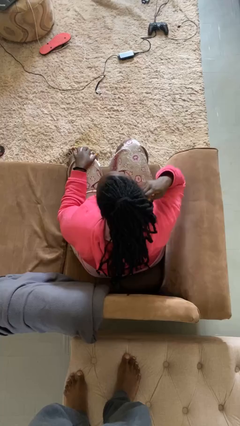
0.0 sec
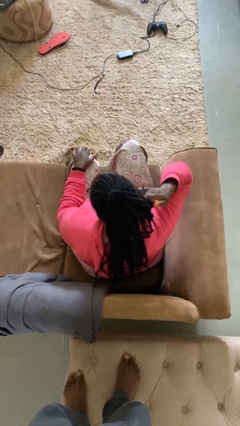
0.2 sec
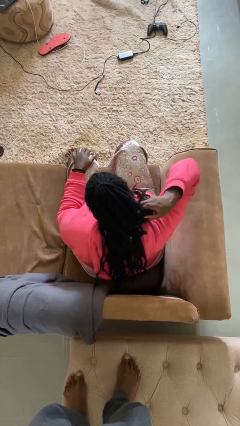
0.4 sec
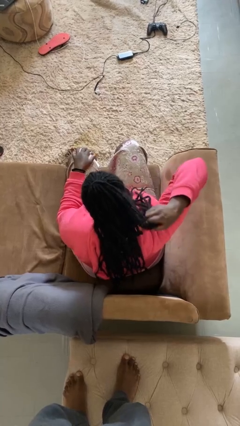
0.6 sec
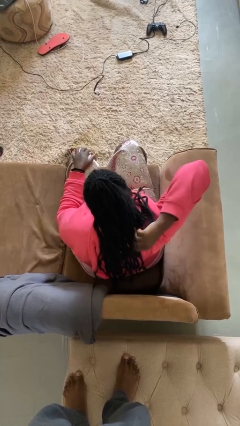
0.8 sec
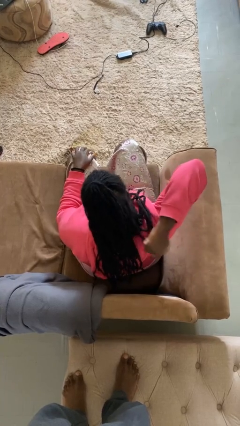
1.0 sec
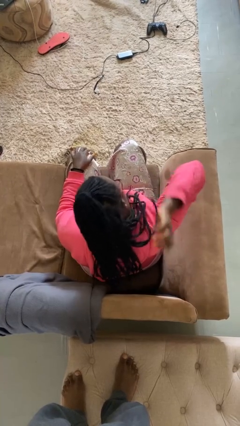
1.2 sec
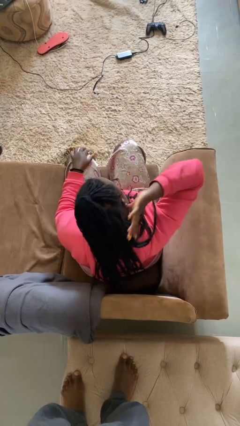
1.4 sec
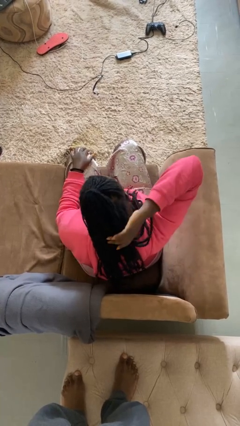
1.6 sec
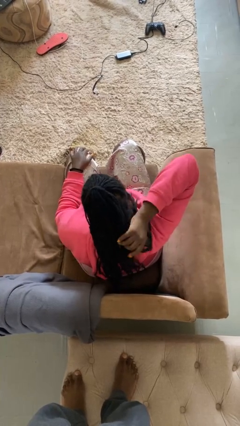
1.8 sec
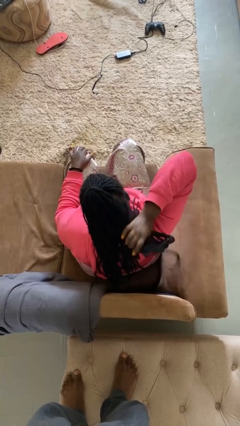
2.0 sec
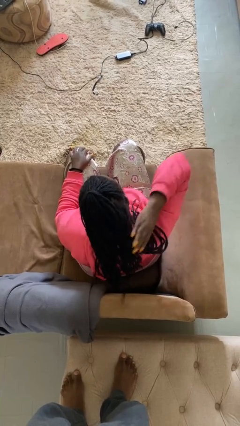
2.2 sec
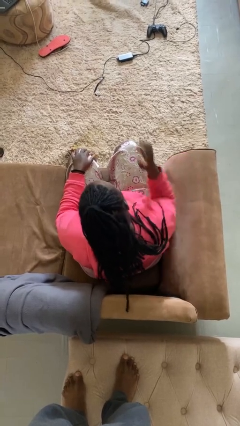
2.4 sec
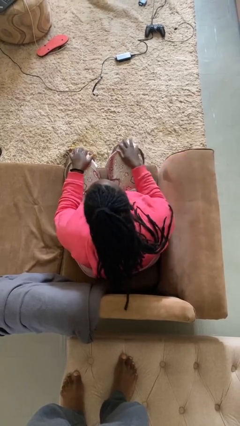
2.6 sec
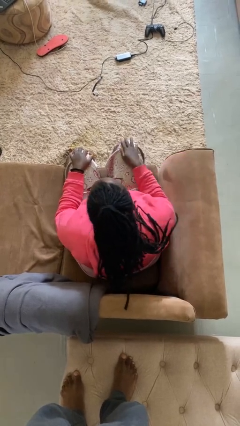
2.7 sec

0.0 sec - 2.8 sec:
person strokes hair

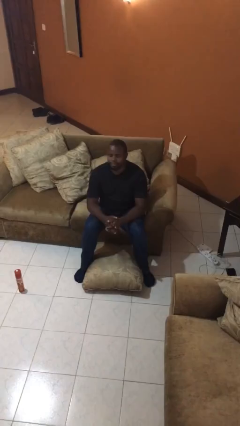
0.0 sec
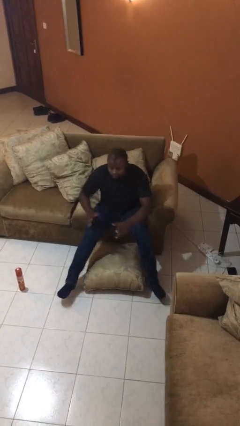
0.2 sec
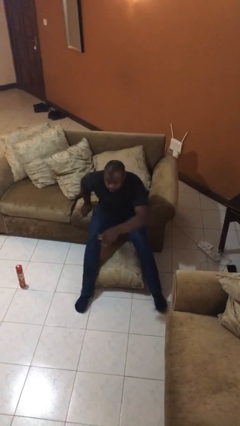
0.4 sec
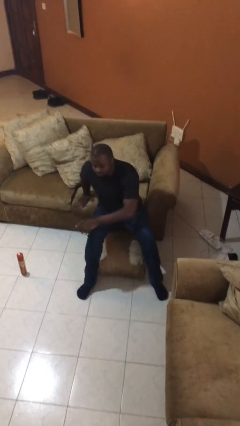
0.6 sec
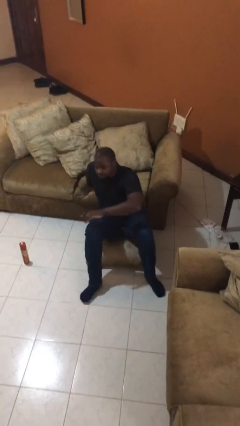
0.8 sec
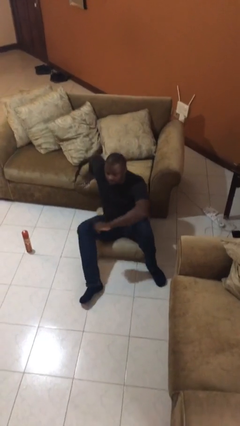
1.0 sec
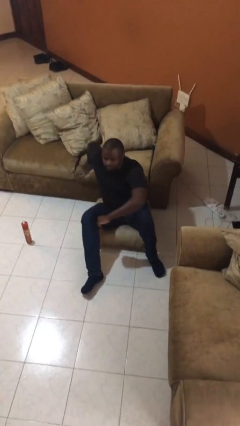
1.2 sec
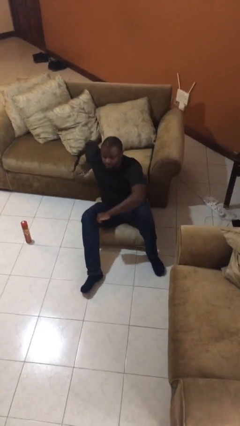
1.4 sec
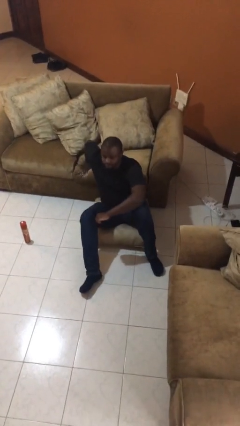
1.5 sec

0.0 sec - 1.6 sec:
person falls from chair

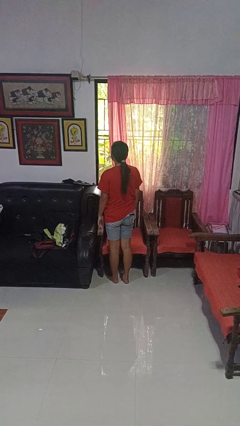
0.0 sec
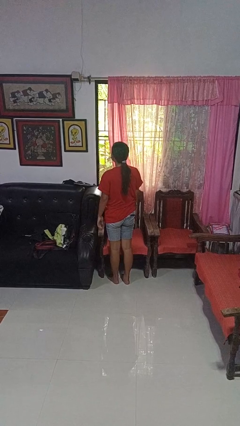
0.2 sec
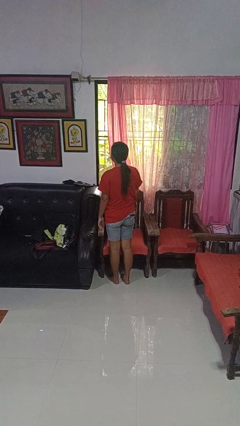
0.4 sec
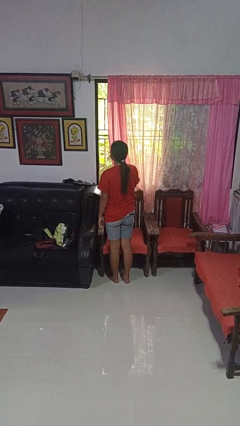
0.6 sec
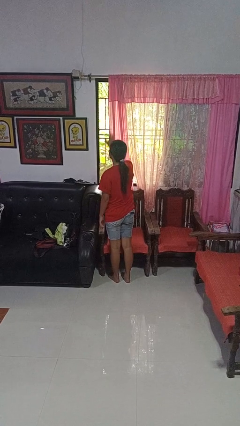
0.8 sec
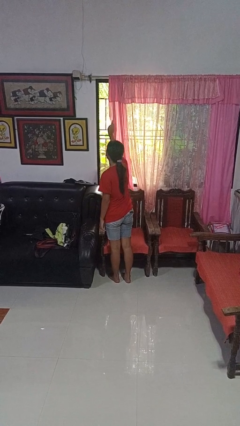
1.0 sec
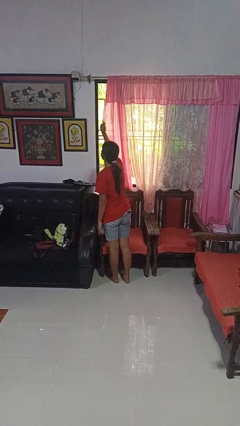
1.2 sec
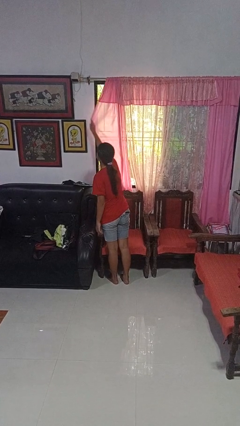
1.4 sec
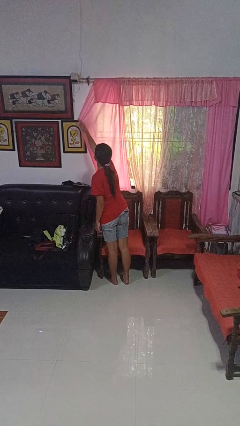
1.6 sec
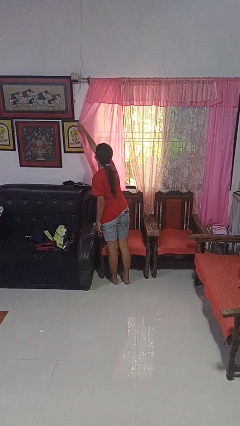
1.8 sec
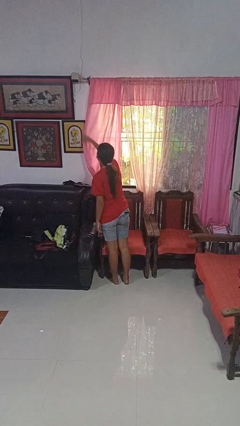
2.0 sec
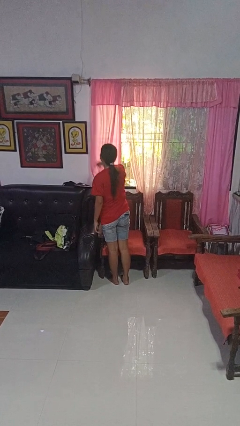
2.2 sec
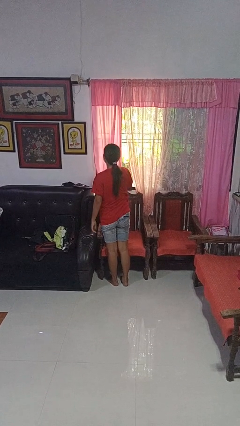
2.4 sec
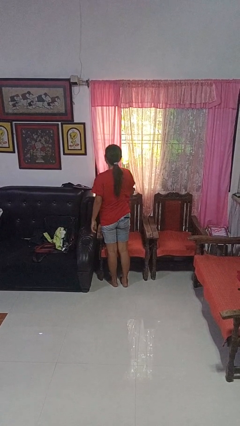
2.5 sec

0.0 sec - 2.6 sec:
person closes curtains

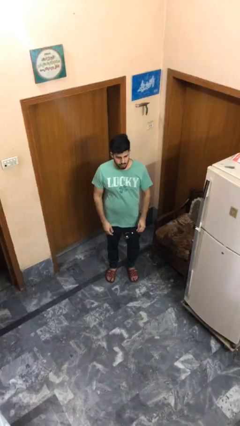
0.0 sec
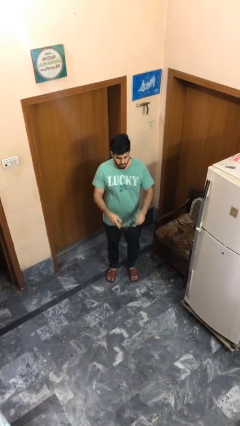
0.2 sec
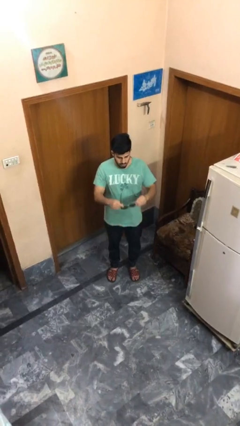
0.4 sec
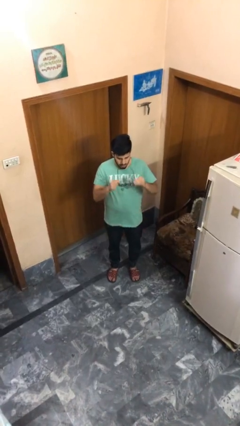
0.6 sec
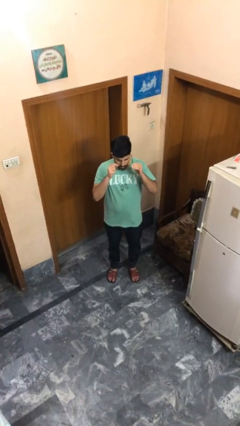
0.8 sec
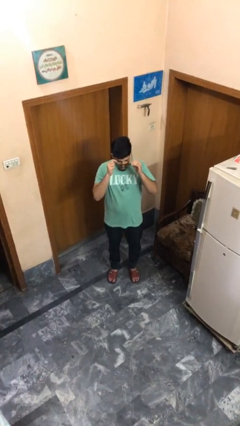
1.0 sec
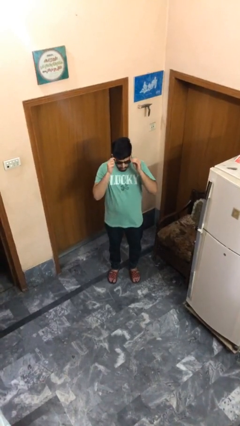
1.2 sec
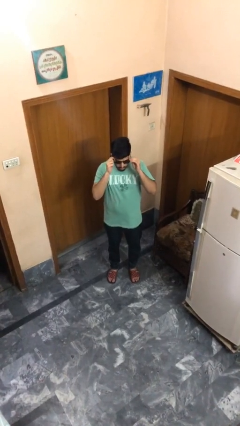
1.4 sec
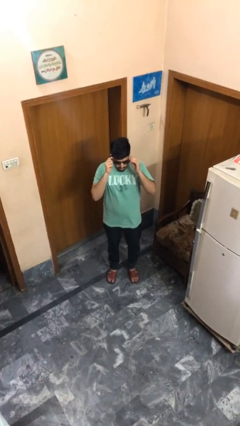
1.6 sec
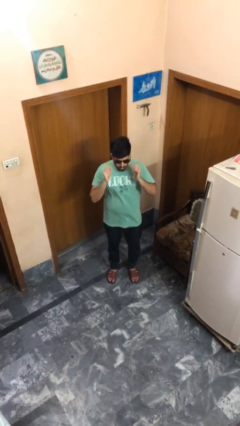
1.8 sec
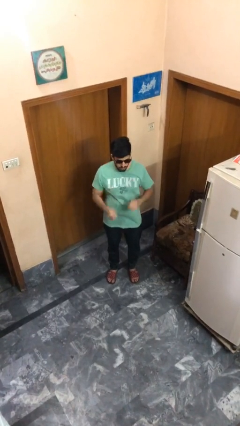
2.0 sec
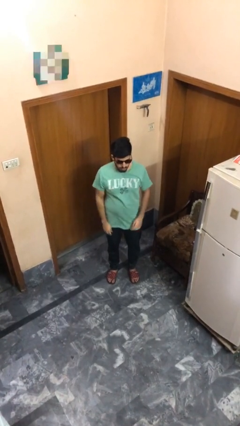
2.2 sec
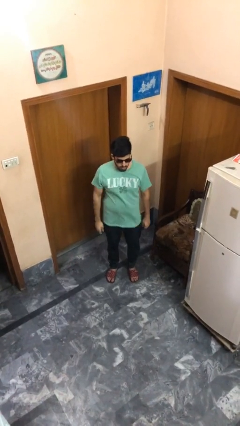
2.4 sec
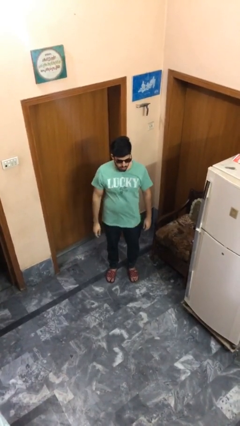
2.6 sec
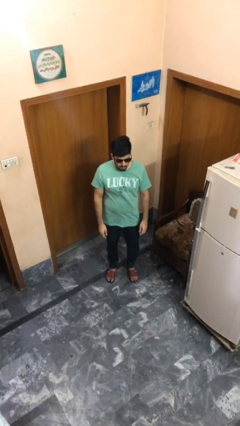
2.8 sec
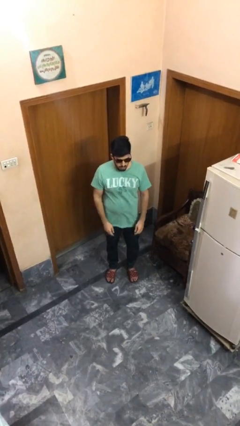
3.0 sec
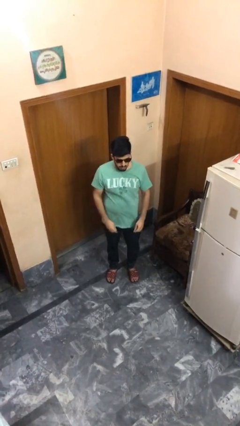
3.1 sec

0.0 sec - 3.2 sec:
person puts on sunglasses

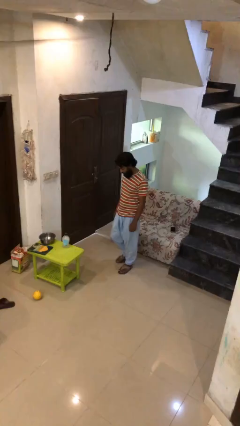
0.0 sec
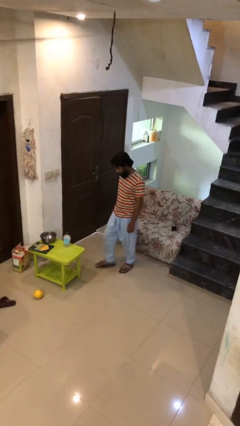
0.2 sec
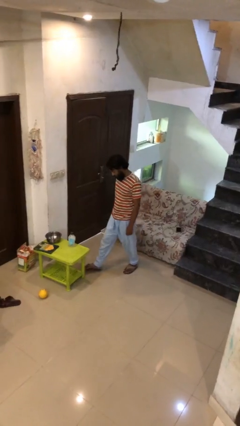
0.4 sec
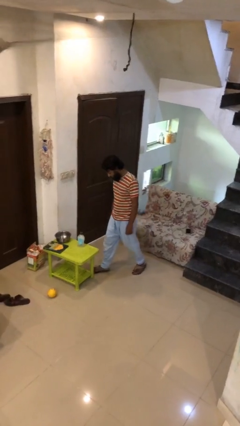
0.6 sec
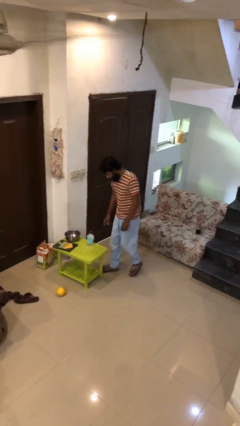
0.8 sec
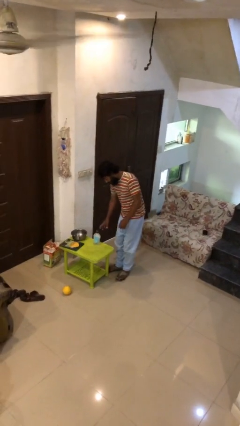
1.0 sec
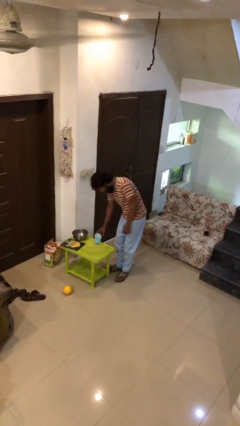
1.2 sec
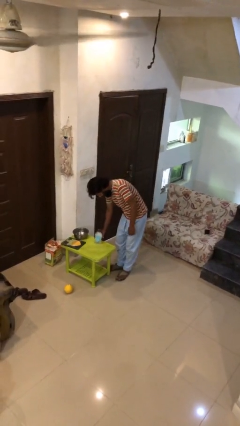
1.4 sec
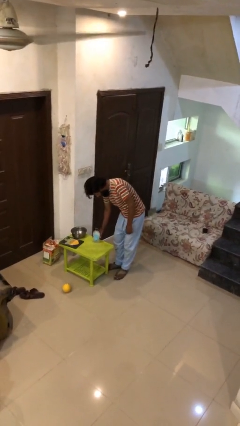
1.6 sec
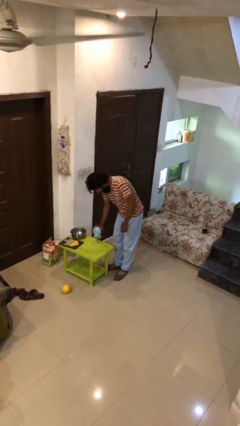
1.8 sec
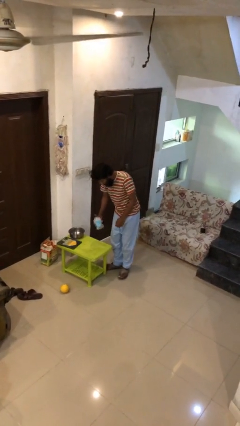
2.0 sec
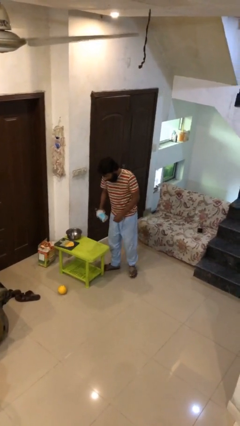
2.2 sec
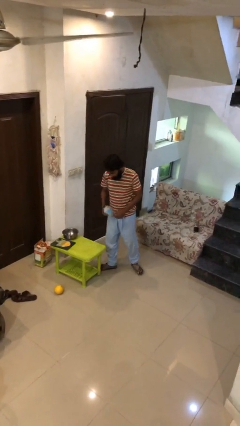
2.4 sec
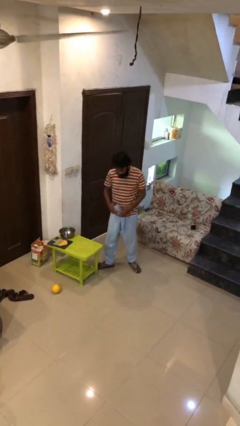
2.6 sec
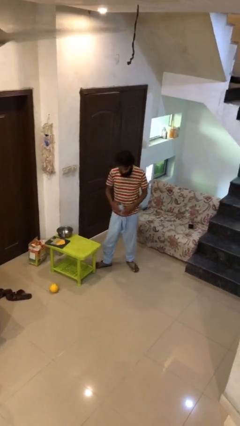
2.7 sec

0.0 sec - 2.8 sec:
person picks up object from table

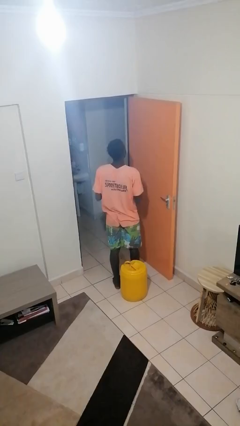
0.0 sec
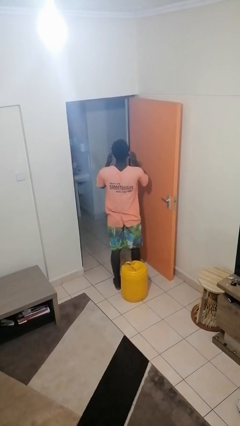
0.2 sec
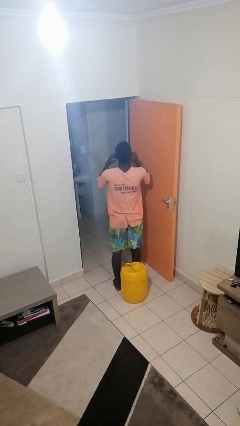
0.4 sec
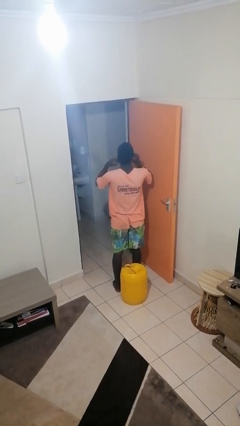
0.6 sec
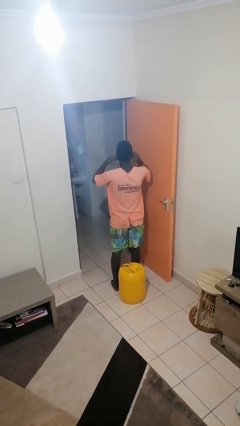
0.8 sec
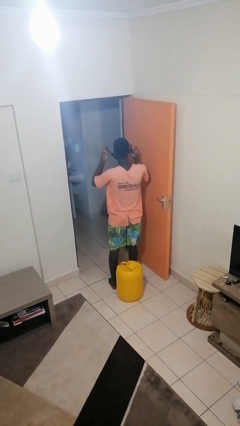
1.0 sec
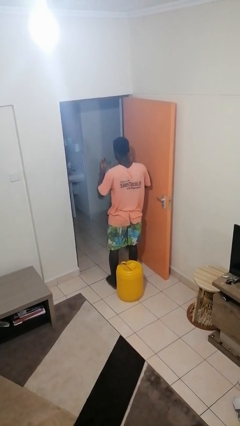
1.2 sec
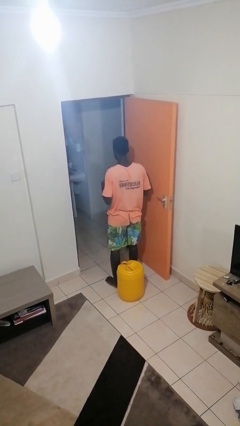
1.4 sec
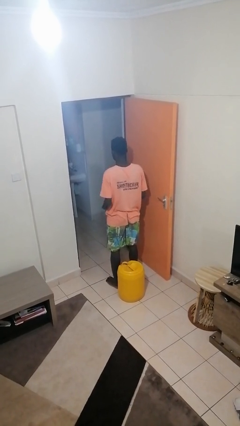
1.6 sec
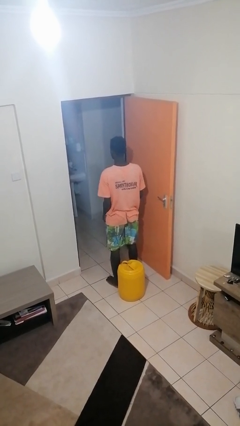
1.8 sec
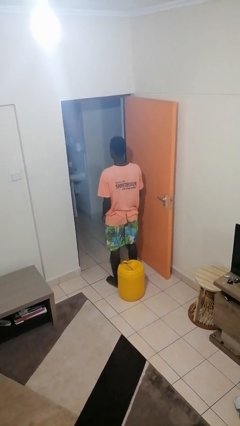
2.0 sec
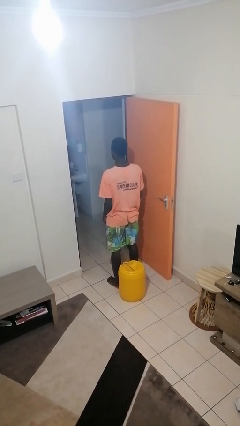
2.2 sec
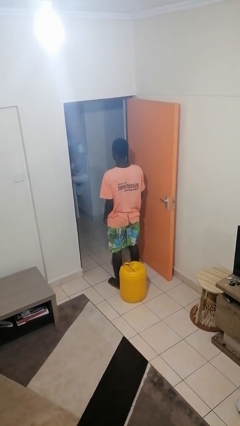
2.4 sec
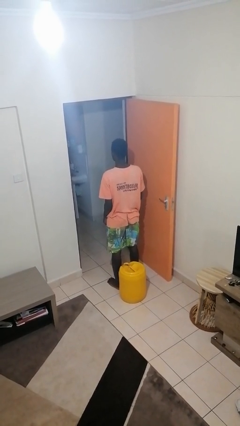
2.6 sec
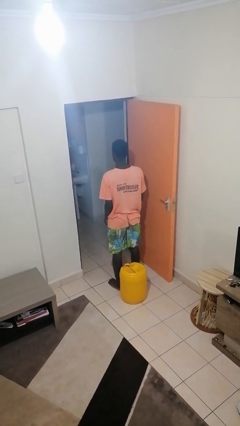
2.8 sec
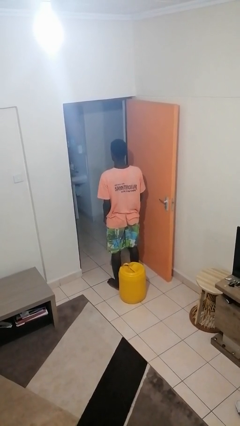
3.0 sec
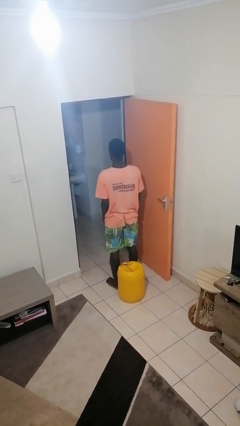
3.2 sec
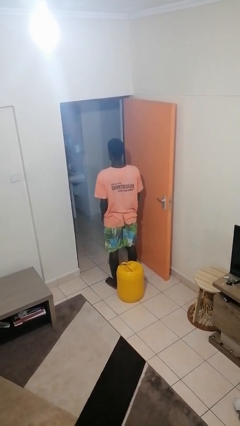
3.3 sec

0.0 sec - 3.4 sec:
person takes off facemask

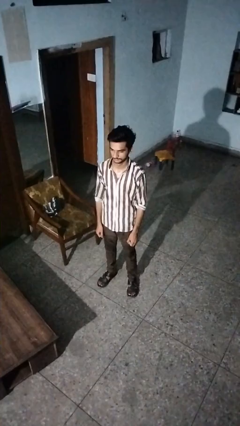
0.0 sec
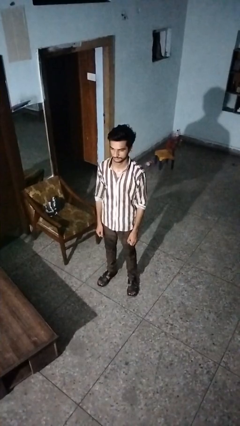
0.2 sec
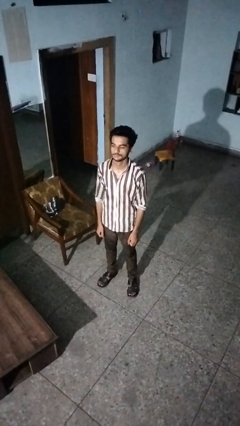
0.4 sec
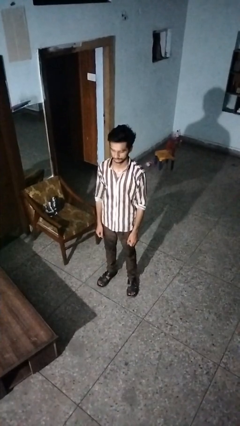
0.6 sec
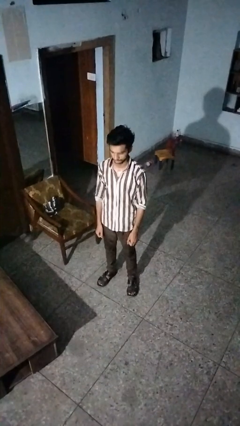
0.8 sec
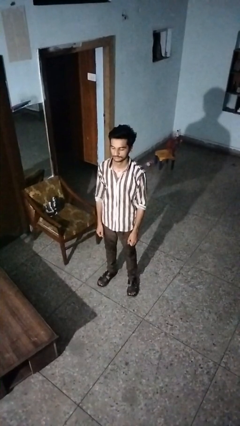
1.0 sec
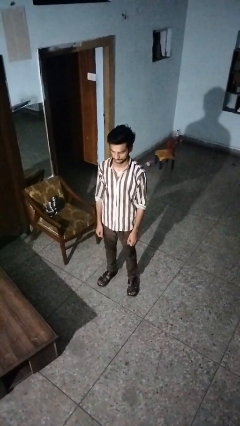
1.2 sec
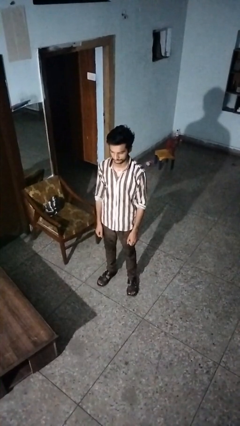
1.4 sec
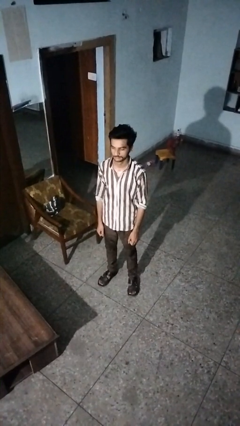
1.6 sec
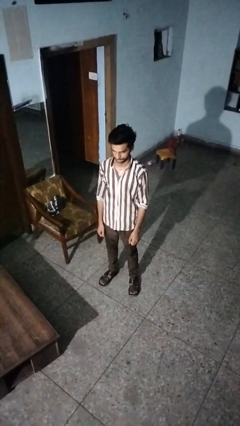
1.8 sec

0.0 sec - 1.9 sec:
person nods head
